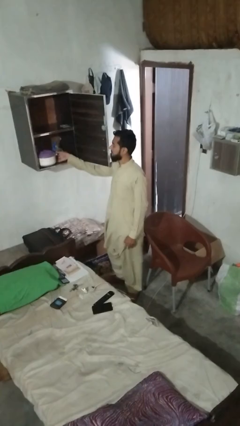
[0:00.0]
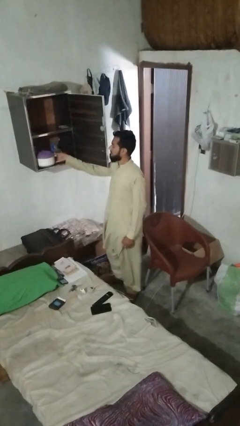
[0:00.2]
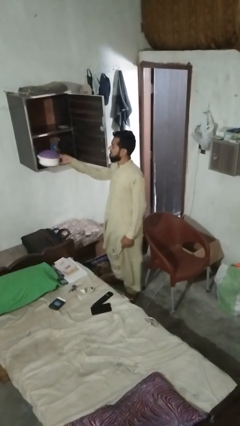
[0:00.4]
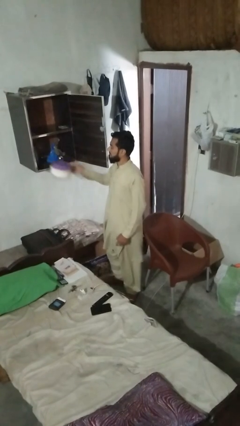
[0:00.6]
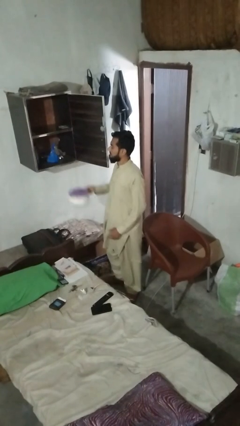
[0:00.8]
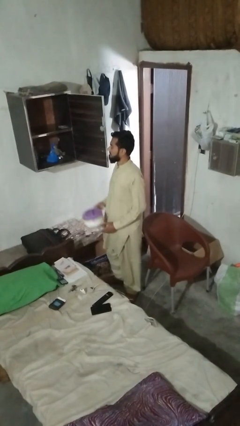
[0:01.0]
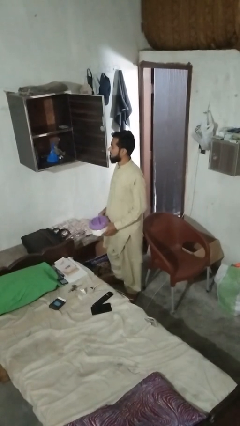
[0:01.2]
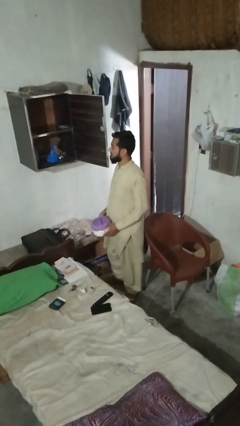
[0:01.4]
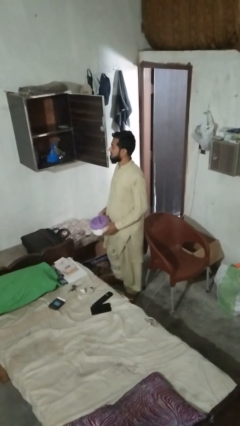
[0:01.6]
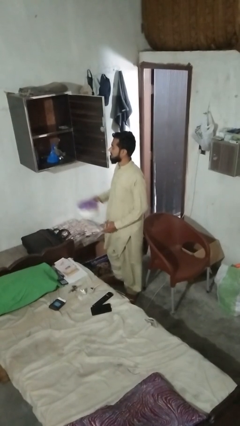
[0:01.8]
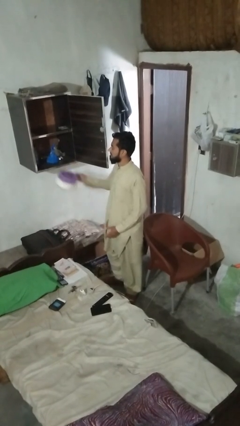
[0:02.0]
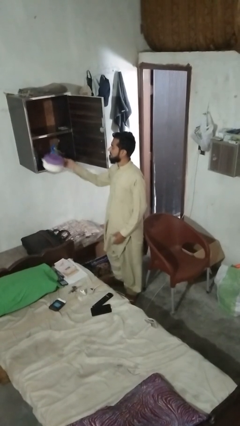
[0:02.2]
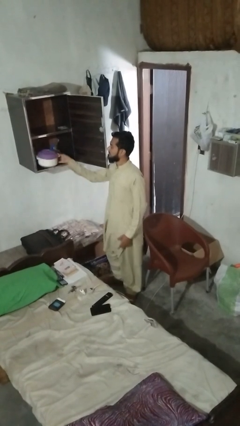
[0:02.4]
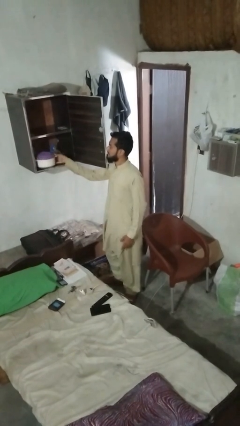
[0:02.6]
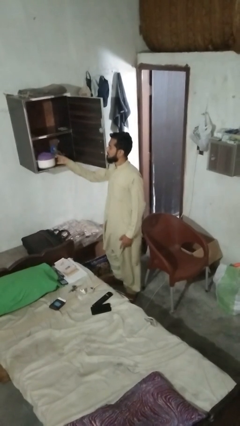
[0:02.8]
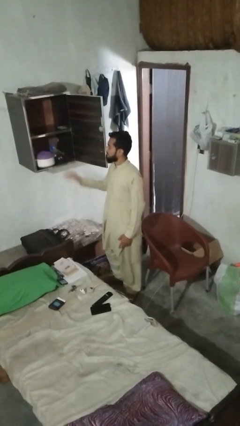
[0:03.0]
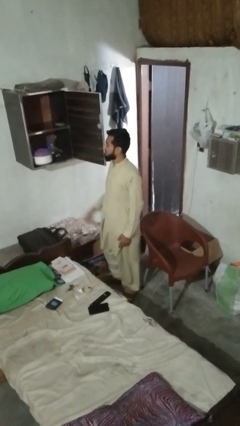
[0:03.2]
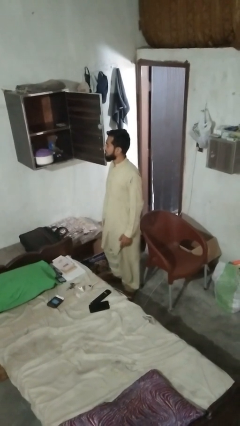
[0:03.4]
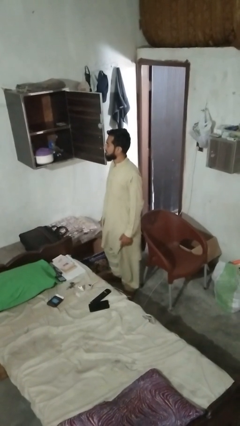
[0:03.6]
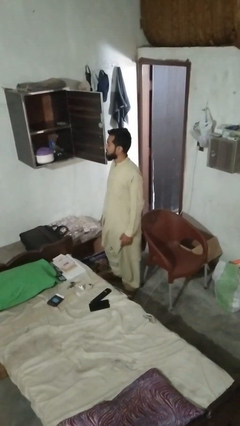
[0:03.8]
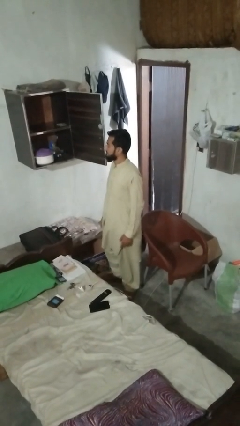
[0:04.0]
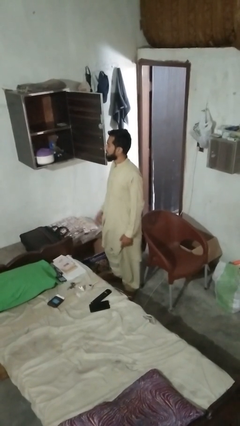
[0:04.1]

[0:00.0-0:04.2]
person loads groceries into cabinet

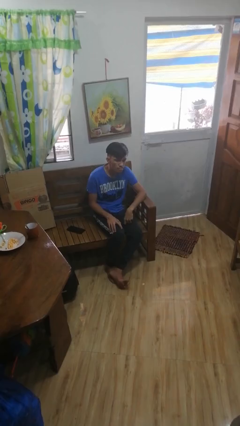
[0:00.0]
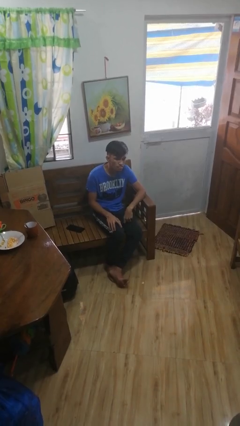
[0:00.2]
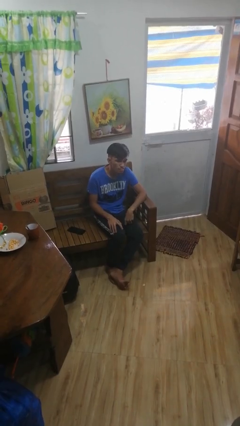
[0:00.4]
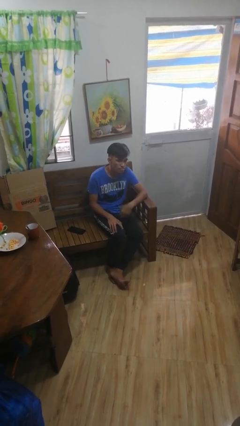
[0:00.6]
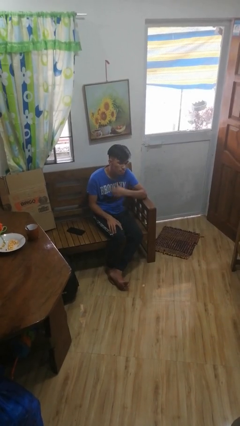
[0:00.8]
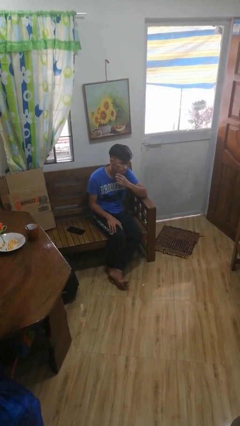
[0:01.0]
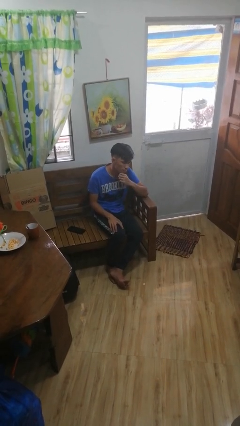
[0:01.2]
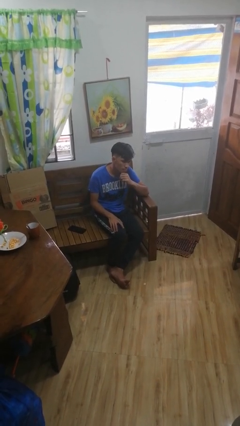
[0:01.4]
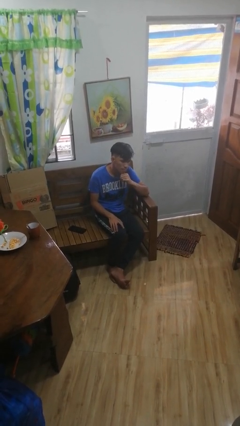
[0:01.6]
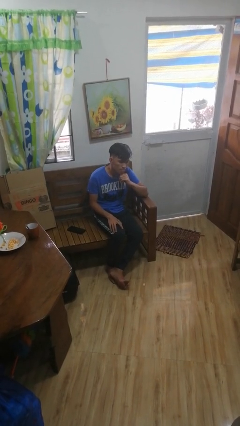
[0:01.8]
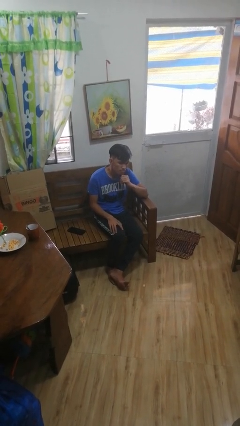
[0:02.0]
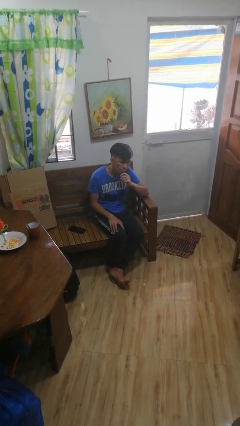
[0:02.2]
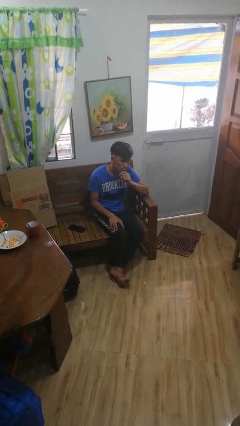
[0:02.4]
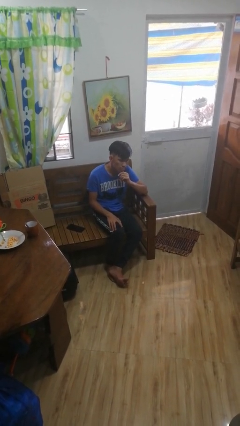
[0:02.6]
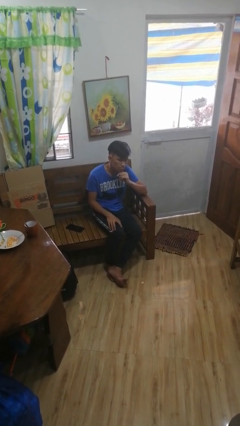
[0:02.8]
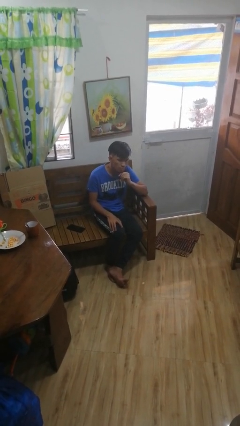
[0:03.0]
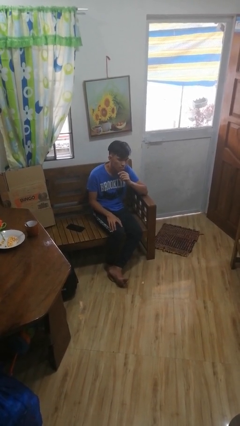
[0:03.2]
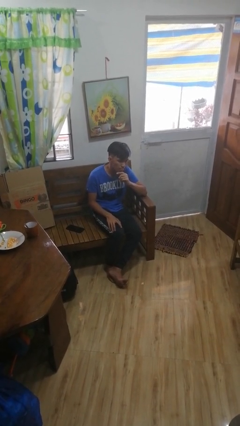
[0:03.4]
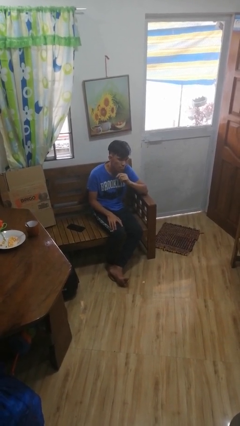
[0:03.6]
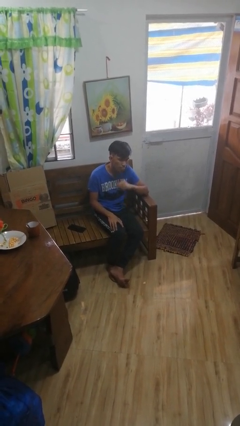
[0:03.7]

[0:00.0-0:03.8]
person strokes chin

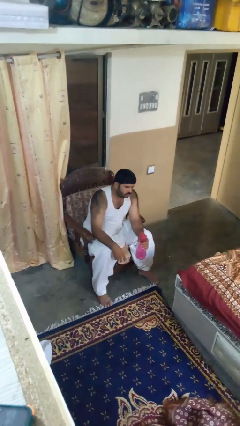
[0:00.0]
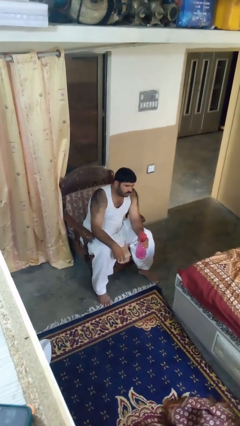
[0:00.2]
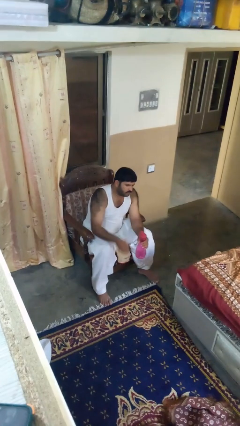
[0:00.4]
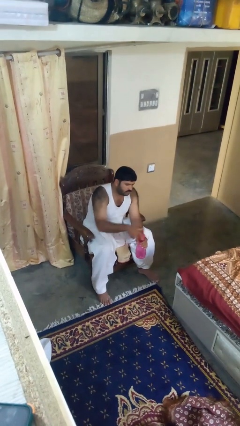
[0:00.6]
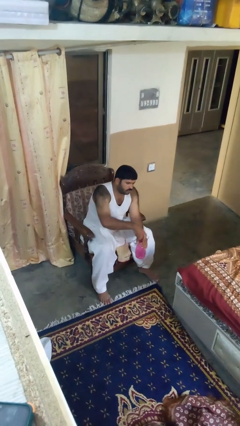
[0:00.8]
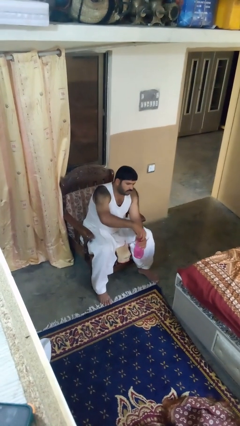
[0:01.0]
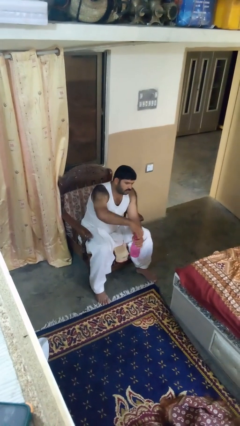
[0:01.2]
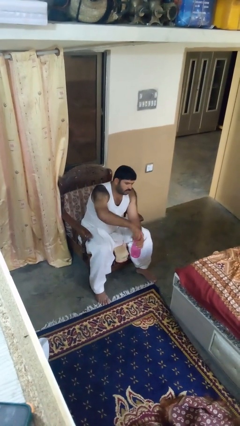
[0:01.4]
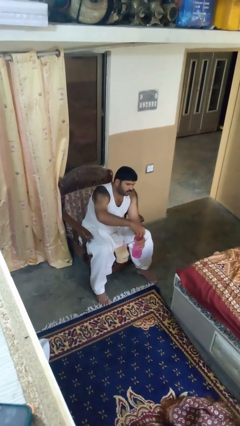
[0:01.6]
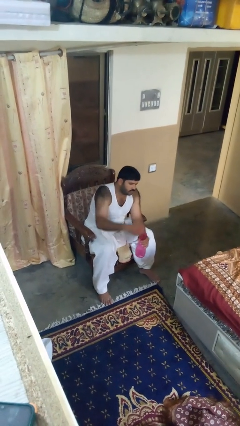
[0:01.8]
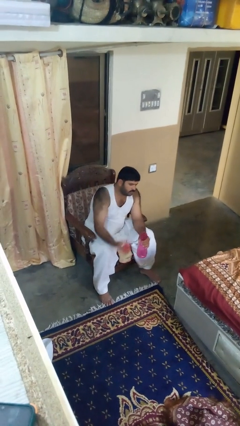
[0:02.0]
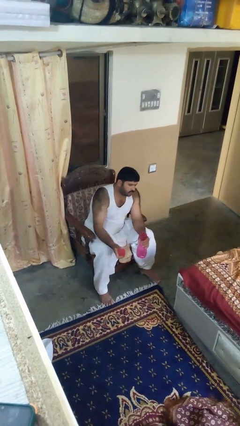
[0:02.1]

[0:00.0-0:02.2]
person unscrews lid from bottle

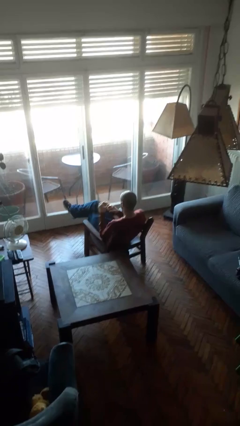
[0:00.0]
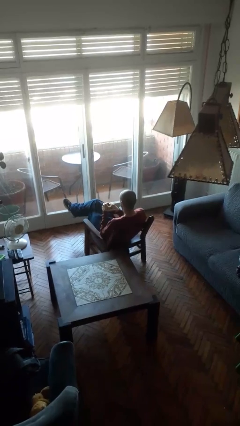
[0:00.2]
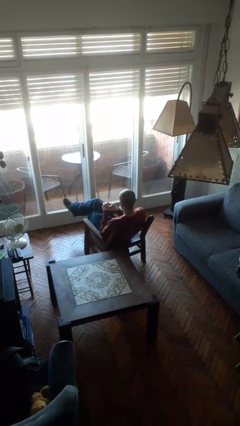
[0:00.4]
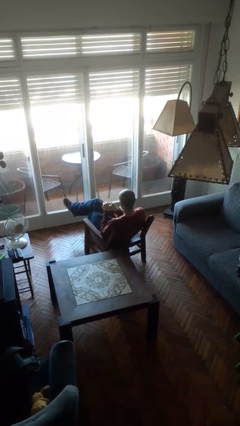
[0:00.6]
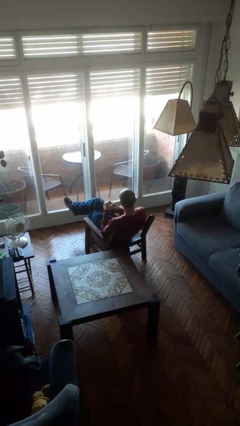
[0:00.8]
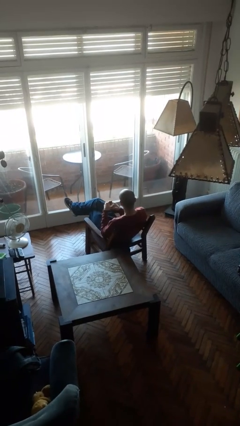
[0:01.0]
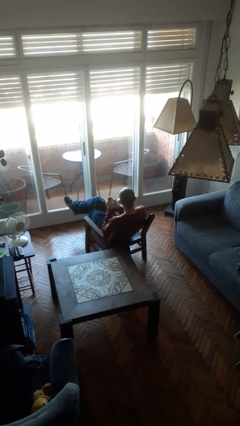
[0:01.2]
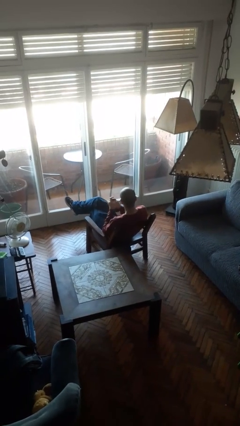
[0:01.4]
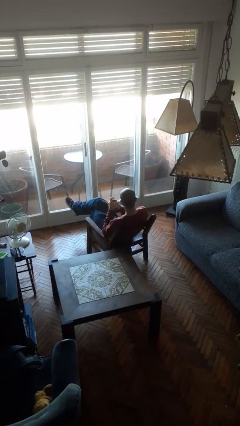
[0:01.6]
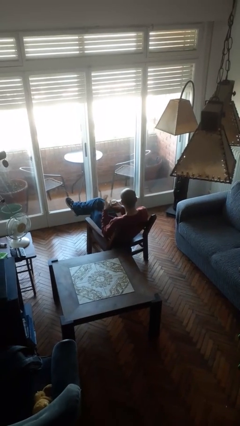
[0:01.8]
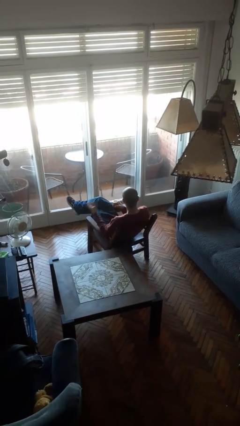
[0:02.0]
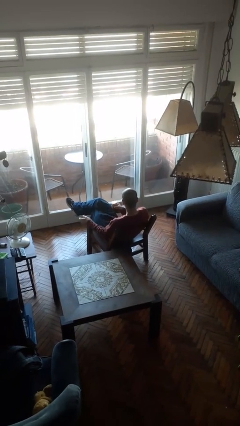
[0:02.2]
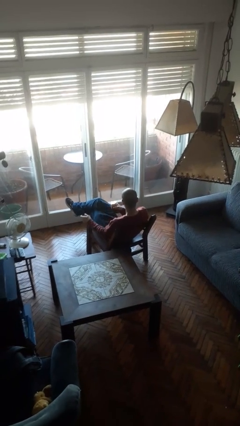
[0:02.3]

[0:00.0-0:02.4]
person closes jar

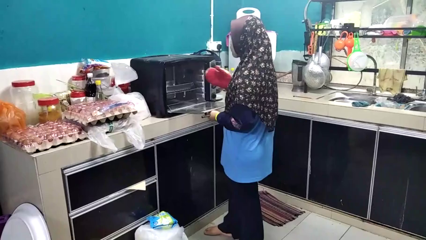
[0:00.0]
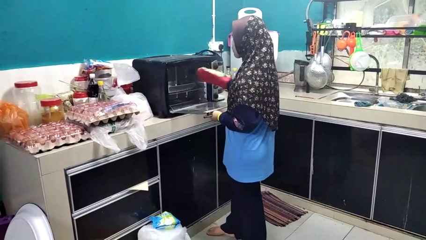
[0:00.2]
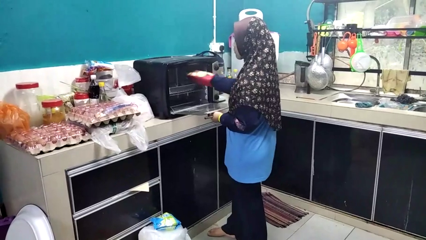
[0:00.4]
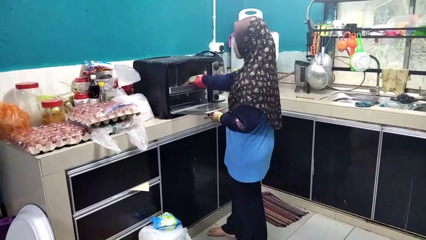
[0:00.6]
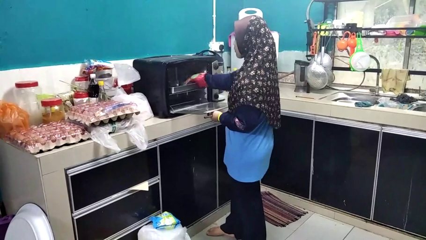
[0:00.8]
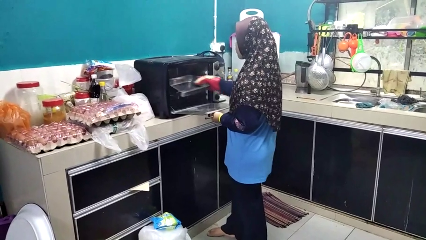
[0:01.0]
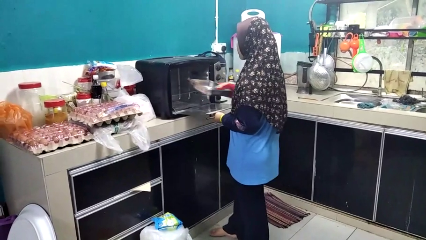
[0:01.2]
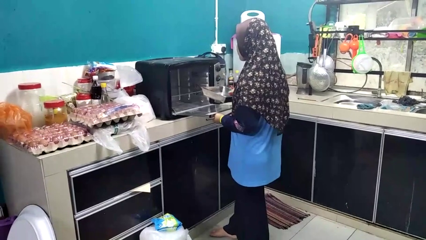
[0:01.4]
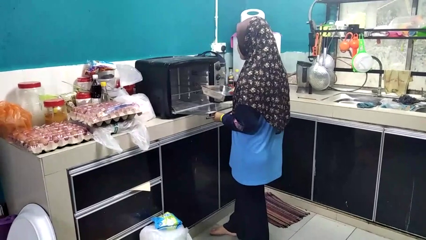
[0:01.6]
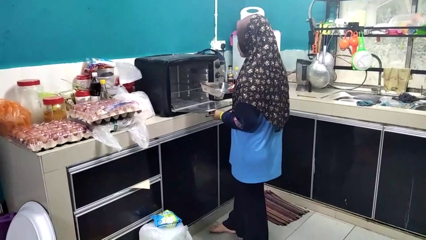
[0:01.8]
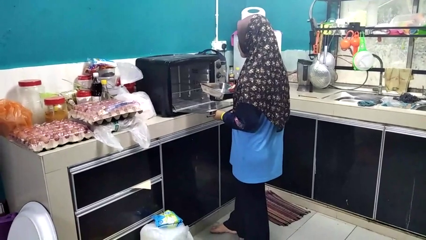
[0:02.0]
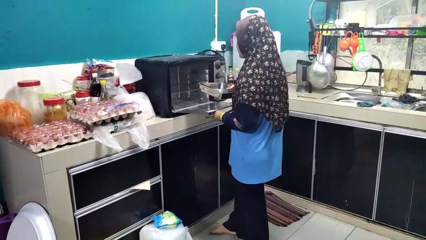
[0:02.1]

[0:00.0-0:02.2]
person takes object from oven

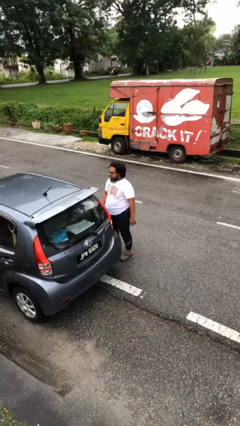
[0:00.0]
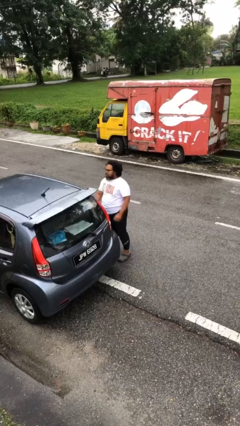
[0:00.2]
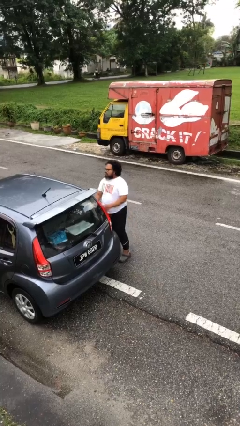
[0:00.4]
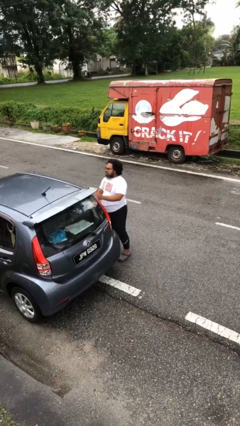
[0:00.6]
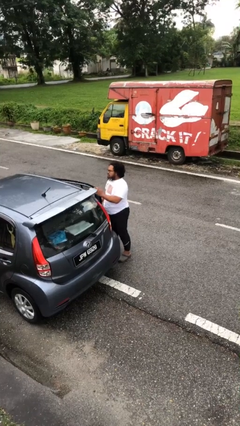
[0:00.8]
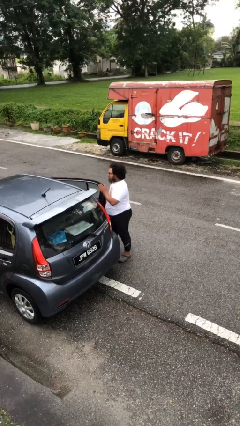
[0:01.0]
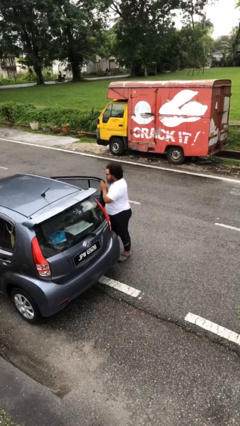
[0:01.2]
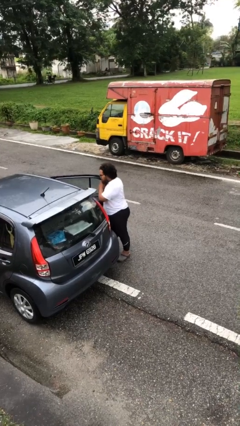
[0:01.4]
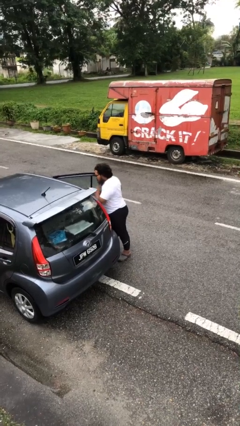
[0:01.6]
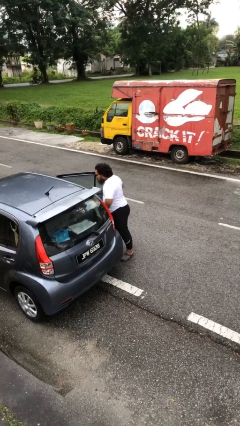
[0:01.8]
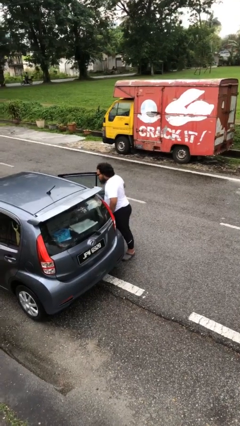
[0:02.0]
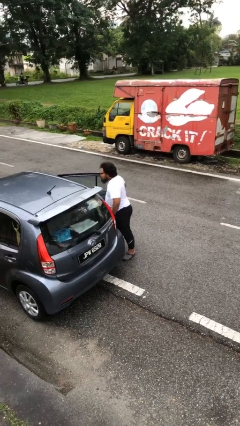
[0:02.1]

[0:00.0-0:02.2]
person opens car door

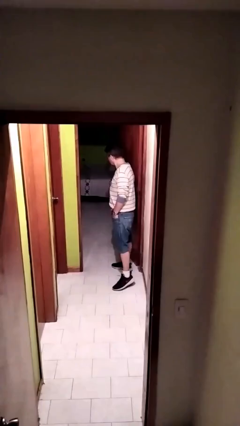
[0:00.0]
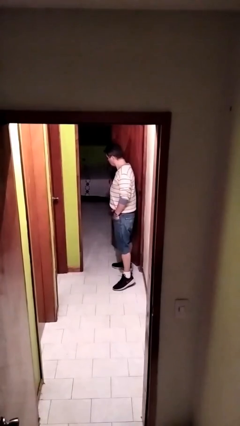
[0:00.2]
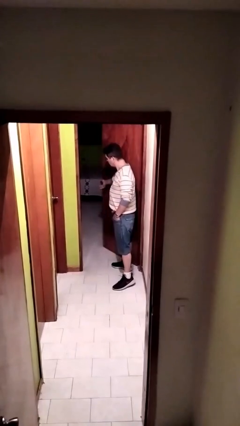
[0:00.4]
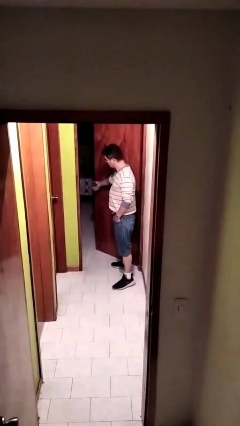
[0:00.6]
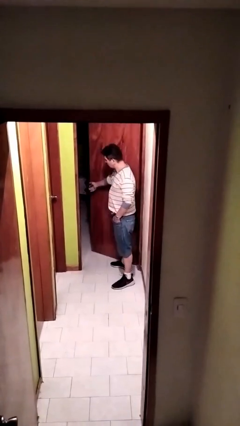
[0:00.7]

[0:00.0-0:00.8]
person closes facility door
